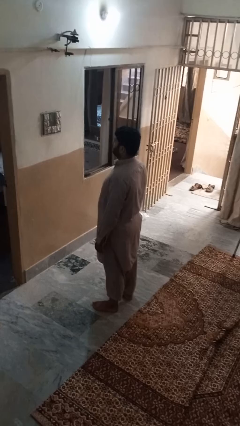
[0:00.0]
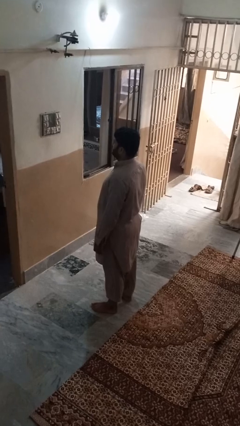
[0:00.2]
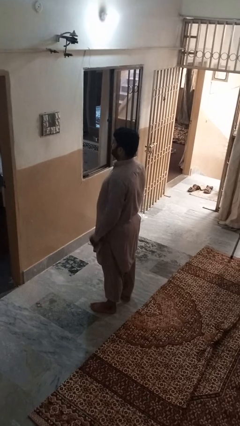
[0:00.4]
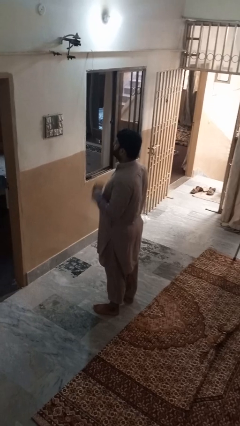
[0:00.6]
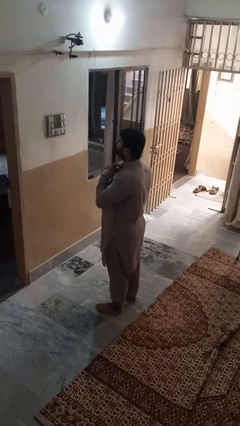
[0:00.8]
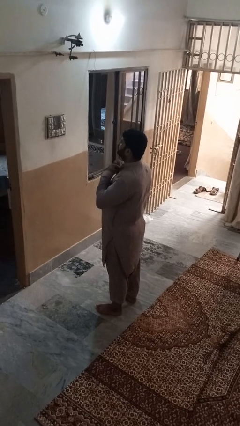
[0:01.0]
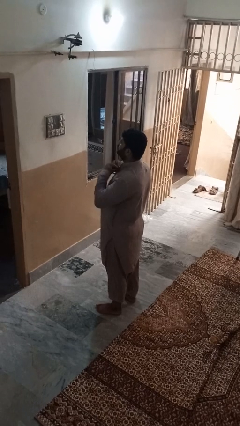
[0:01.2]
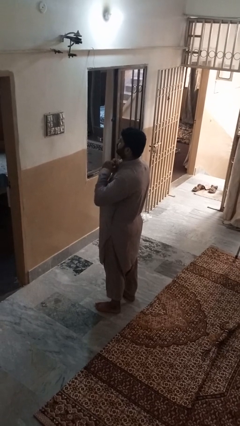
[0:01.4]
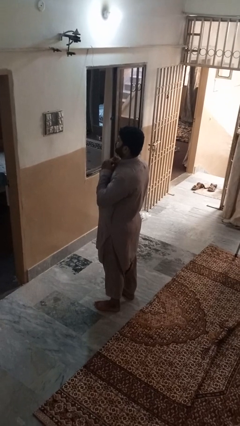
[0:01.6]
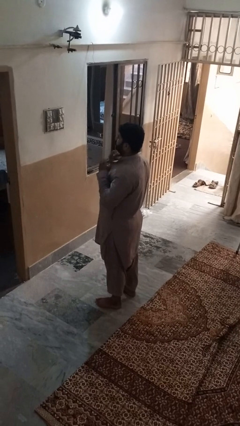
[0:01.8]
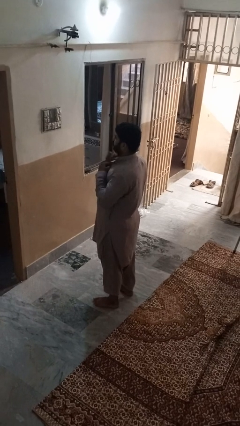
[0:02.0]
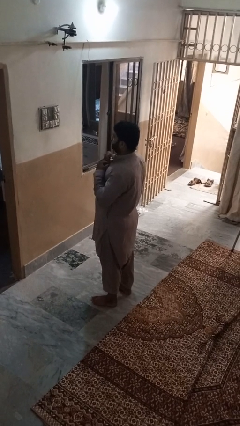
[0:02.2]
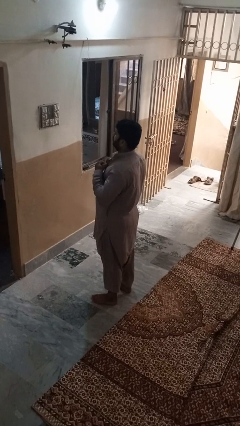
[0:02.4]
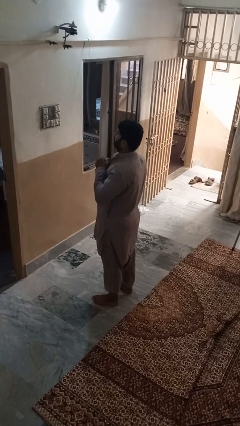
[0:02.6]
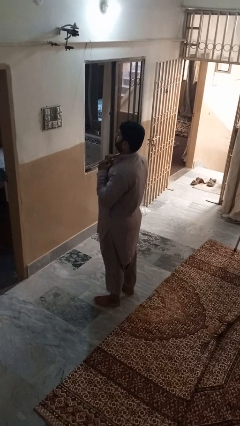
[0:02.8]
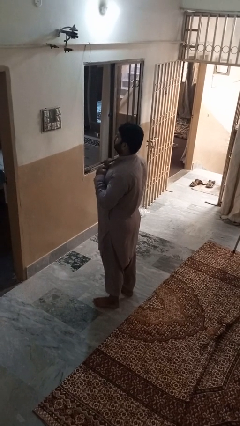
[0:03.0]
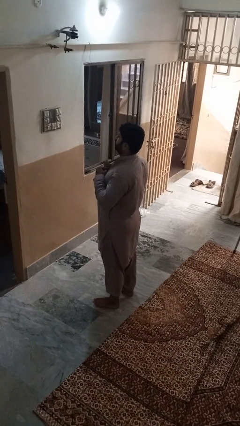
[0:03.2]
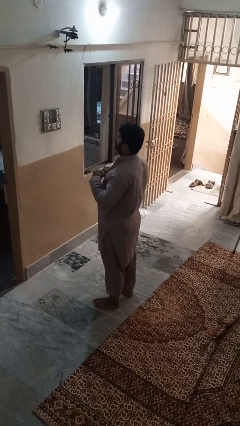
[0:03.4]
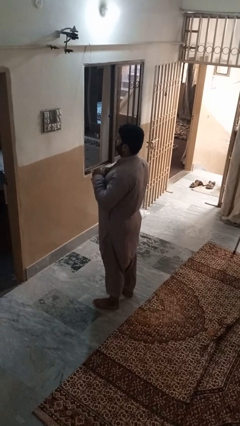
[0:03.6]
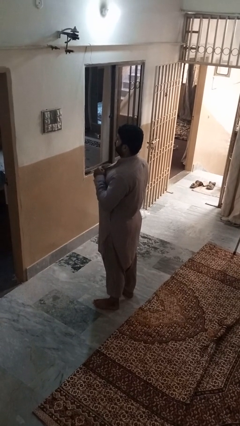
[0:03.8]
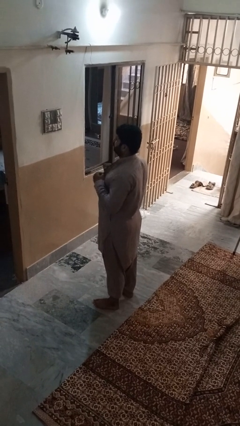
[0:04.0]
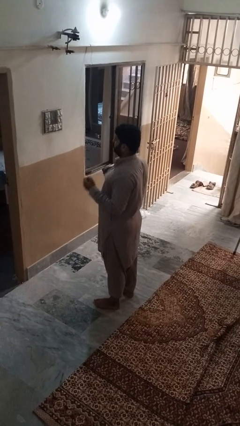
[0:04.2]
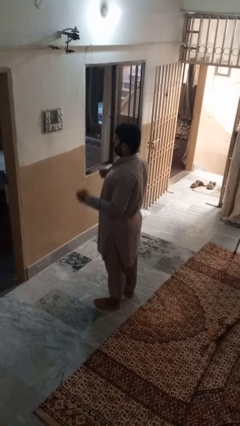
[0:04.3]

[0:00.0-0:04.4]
person unbuttons shirt

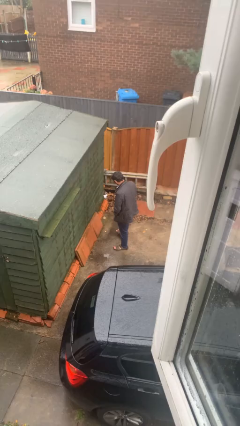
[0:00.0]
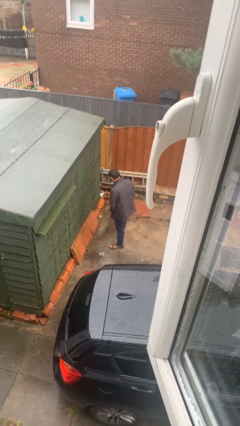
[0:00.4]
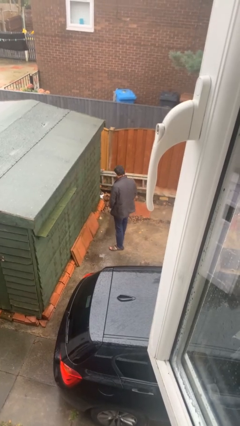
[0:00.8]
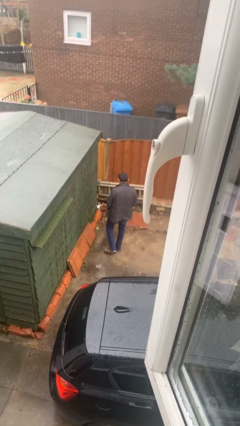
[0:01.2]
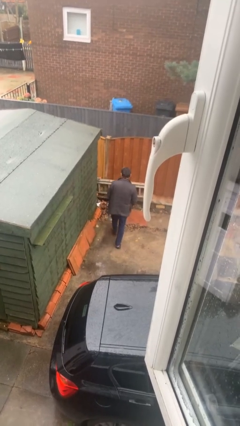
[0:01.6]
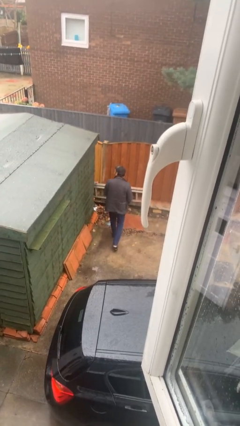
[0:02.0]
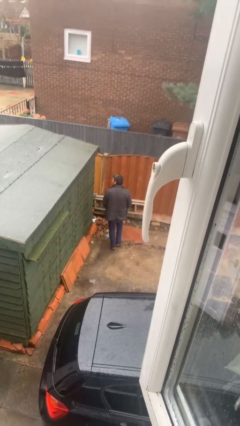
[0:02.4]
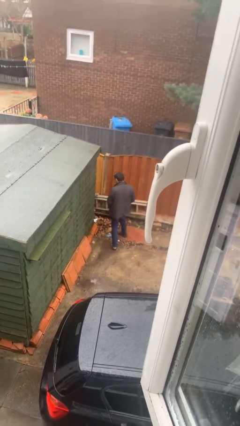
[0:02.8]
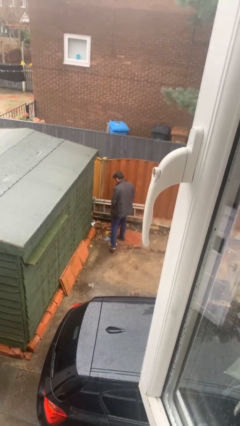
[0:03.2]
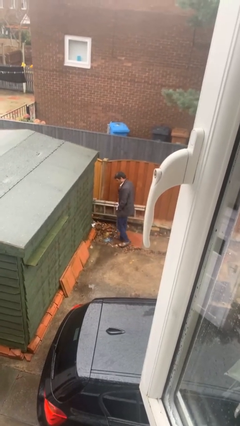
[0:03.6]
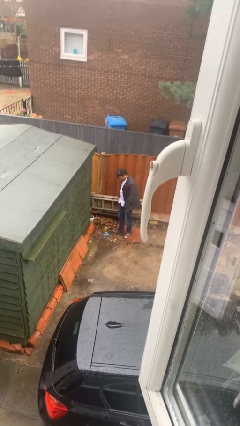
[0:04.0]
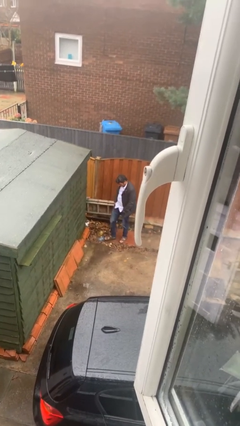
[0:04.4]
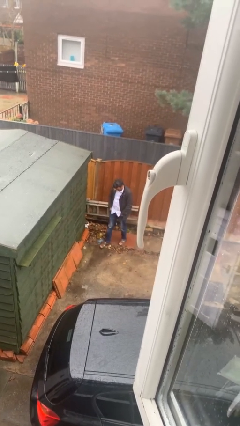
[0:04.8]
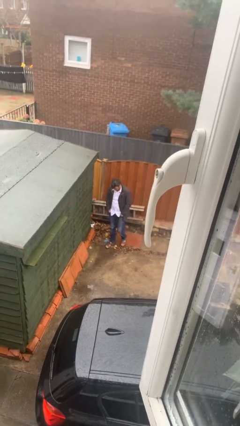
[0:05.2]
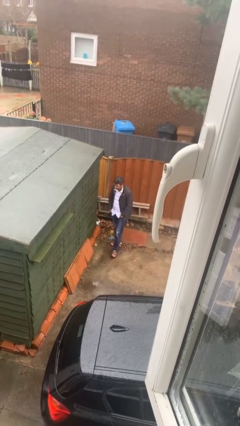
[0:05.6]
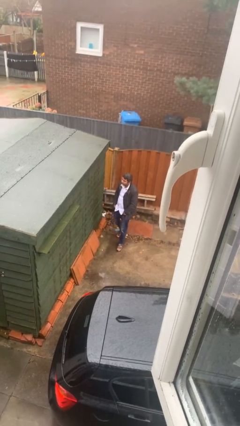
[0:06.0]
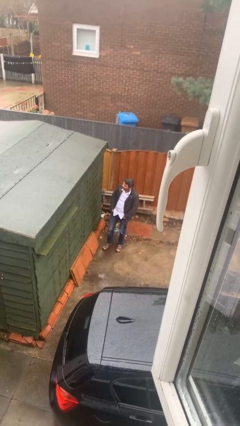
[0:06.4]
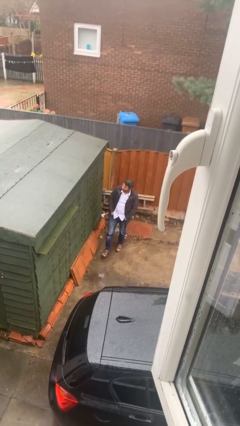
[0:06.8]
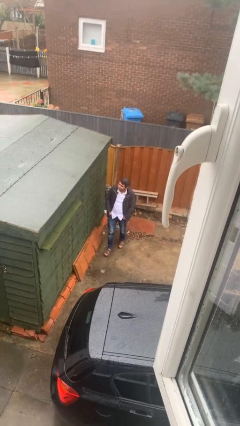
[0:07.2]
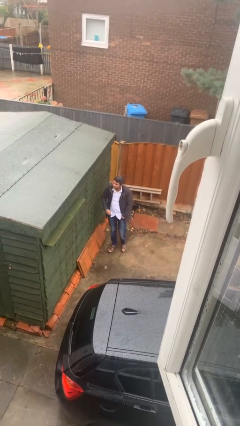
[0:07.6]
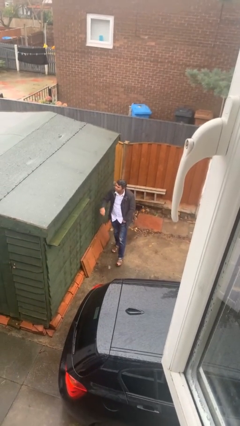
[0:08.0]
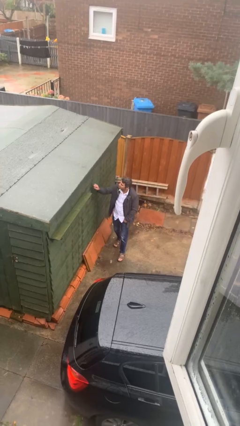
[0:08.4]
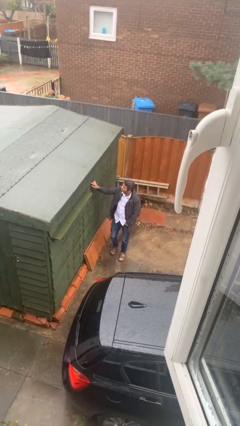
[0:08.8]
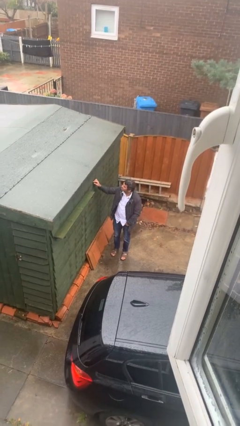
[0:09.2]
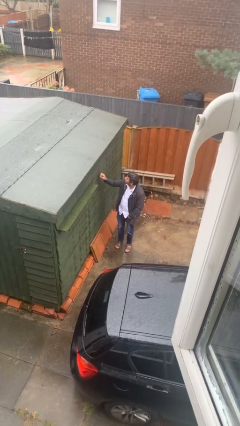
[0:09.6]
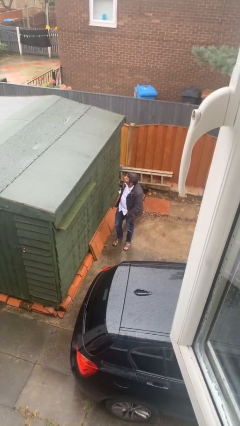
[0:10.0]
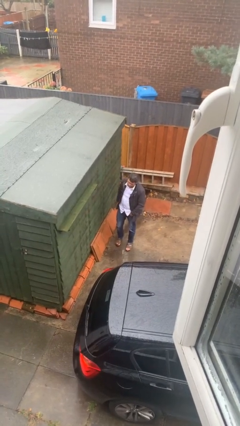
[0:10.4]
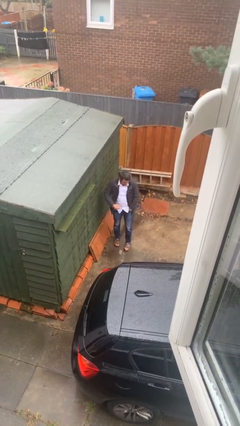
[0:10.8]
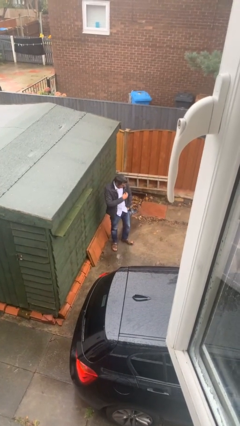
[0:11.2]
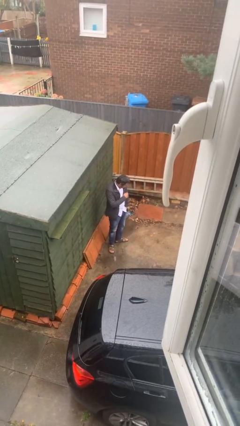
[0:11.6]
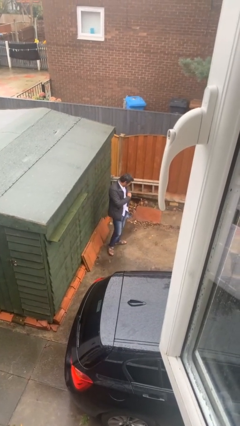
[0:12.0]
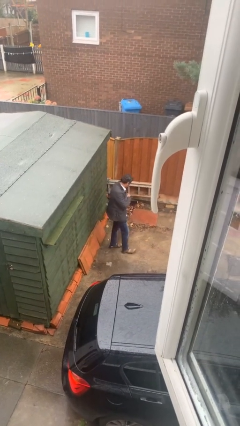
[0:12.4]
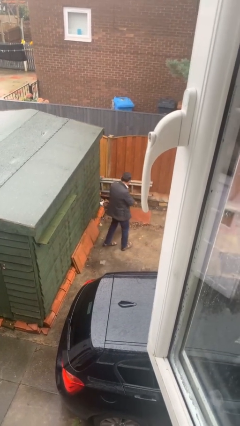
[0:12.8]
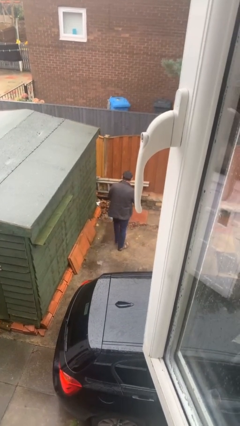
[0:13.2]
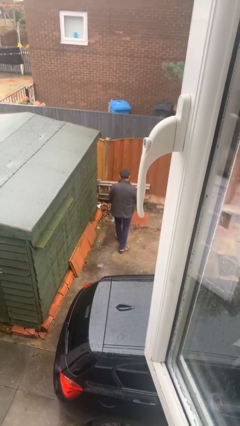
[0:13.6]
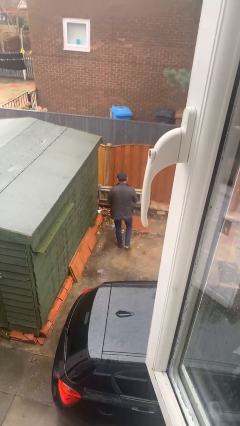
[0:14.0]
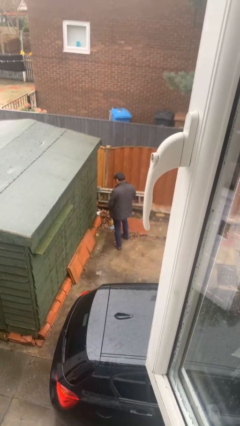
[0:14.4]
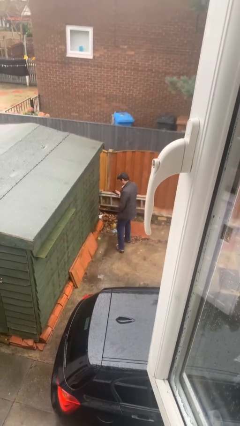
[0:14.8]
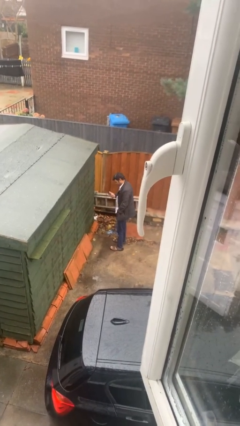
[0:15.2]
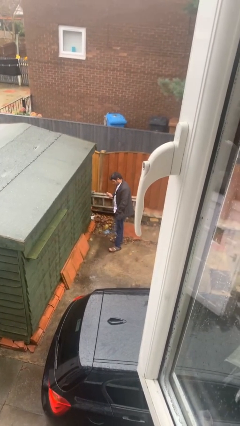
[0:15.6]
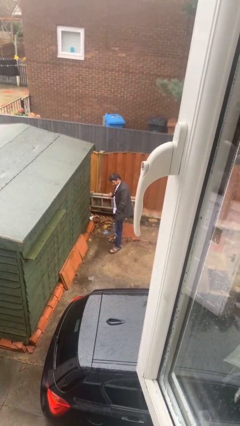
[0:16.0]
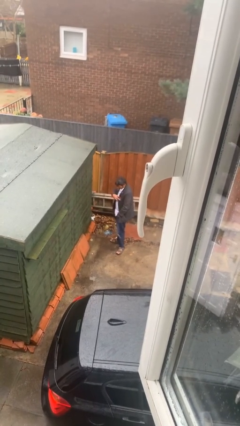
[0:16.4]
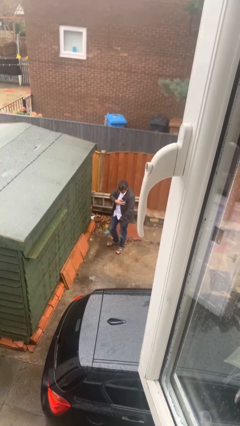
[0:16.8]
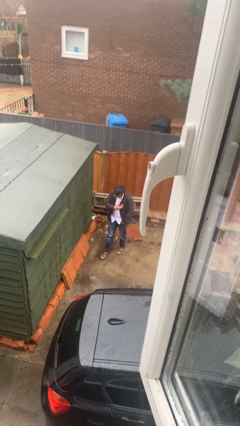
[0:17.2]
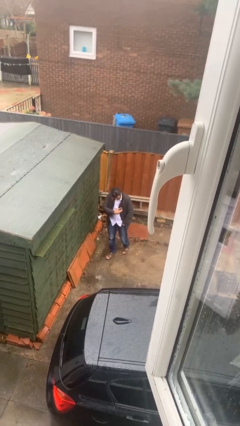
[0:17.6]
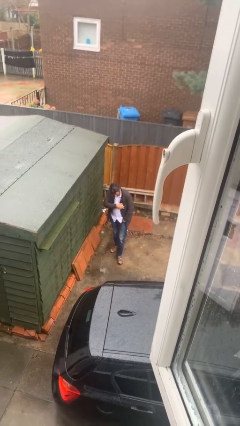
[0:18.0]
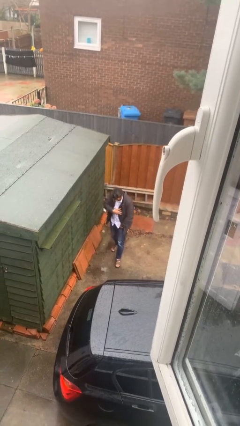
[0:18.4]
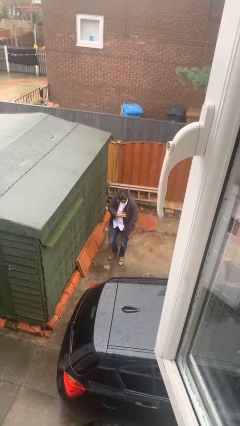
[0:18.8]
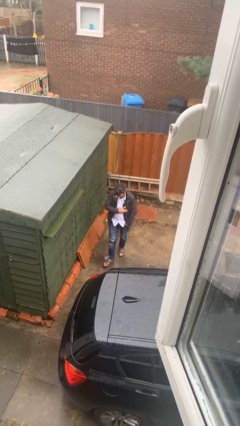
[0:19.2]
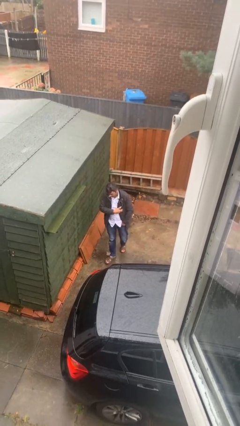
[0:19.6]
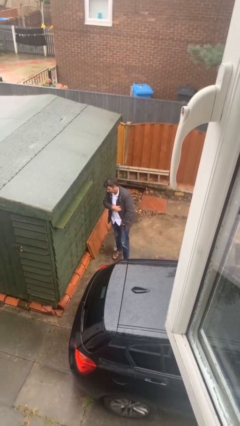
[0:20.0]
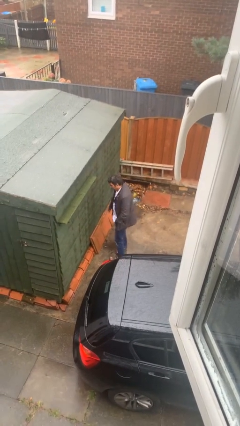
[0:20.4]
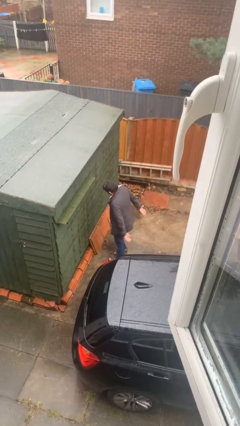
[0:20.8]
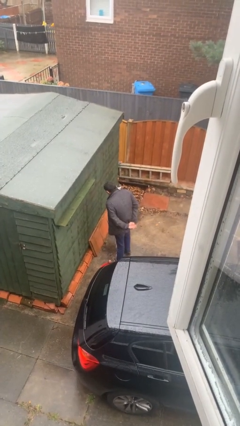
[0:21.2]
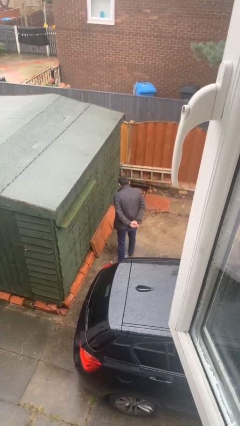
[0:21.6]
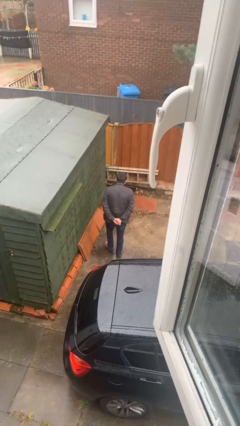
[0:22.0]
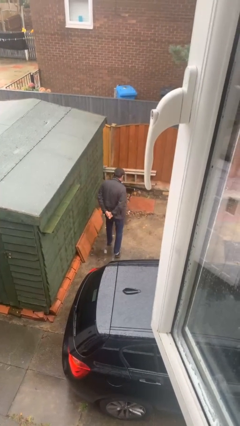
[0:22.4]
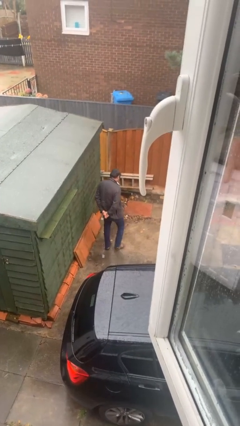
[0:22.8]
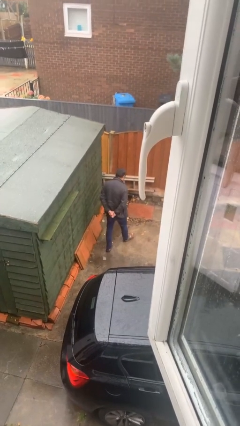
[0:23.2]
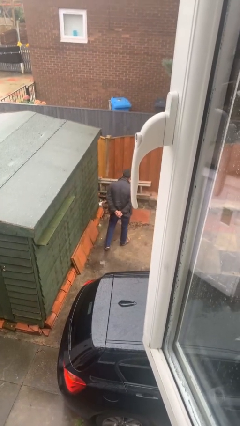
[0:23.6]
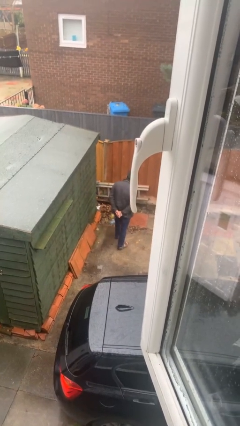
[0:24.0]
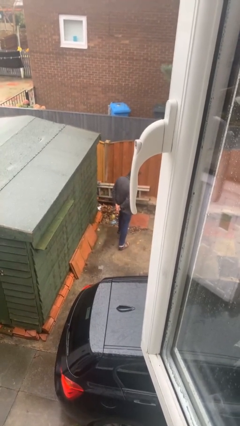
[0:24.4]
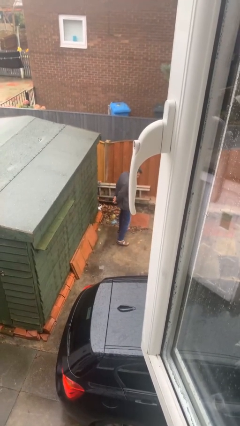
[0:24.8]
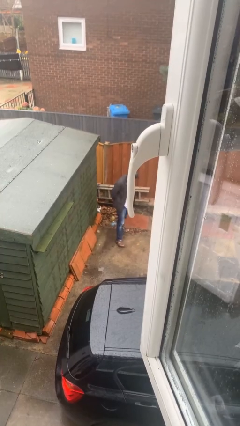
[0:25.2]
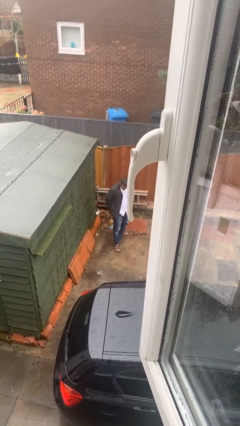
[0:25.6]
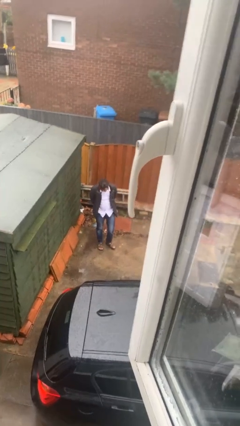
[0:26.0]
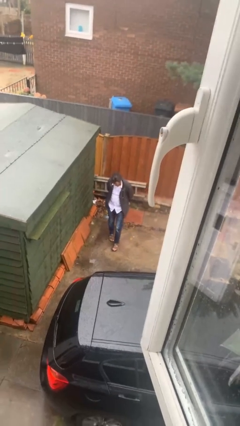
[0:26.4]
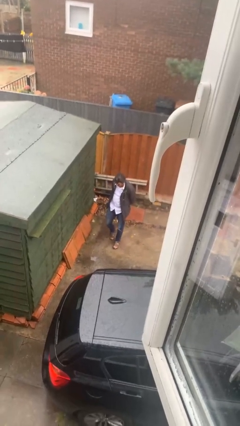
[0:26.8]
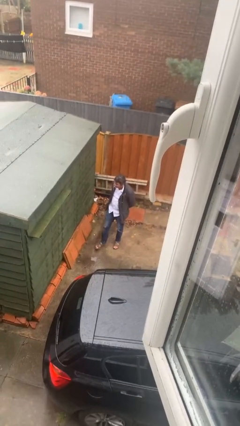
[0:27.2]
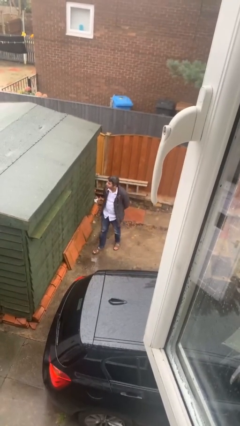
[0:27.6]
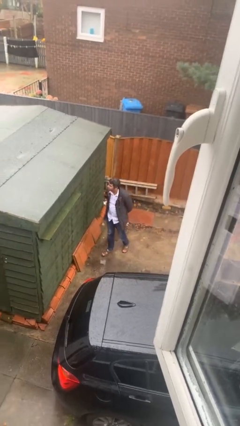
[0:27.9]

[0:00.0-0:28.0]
person walks
